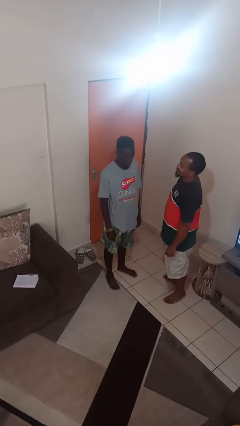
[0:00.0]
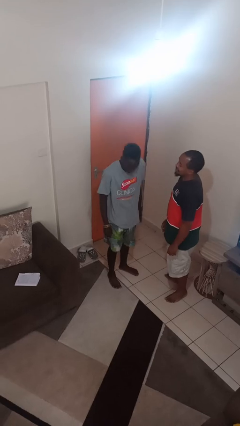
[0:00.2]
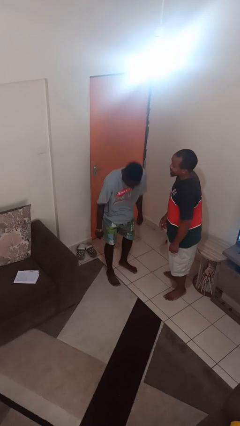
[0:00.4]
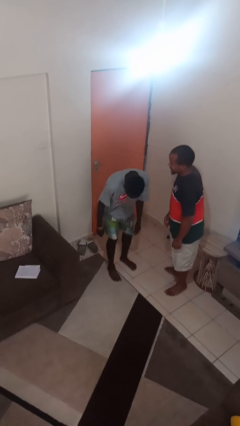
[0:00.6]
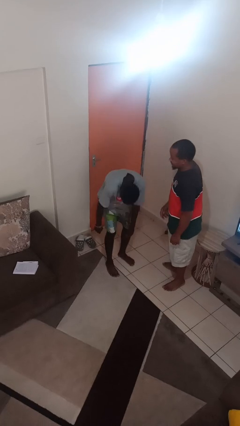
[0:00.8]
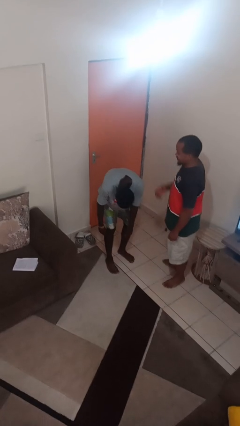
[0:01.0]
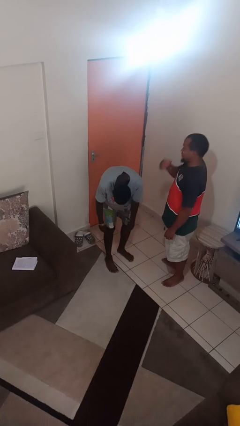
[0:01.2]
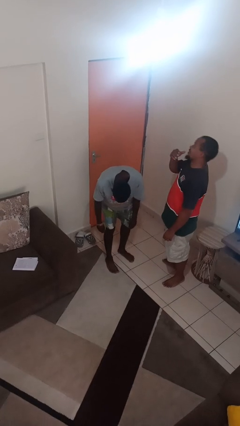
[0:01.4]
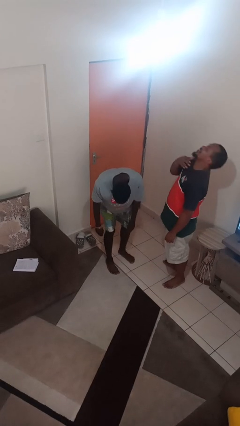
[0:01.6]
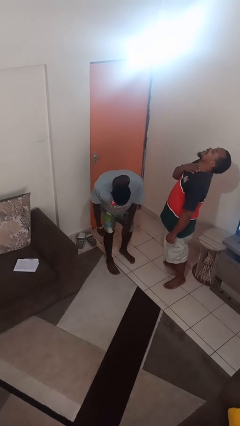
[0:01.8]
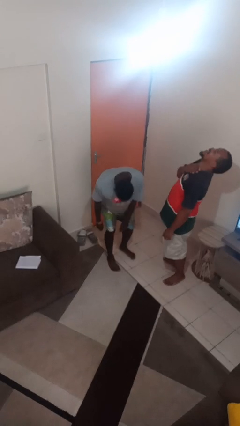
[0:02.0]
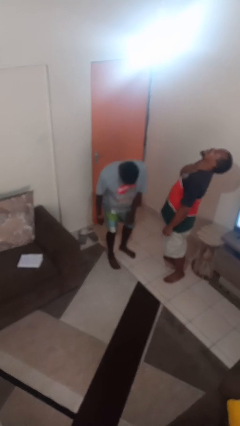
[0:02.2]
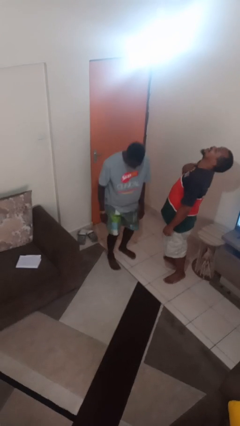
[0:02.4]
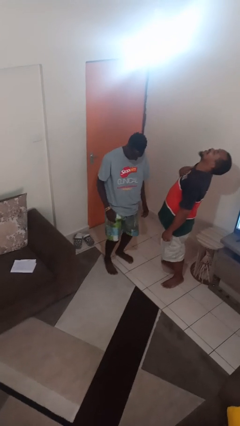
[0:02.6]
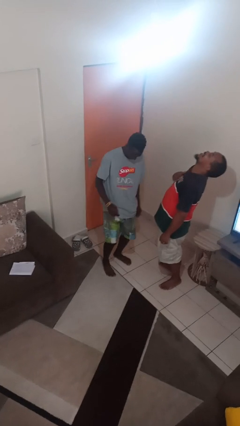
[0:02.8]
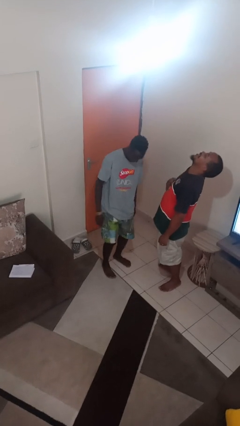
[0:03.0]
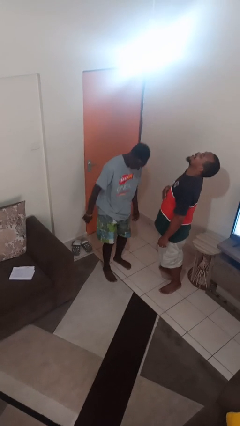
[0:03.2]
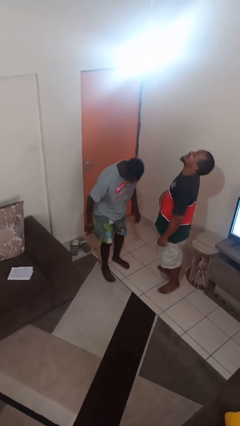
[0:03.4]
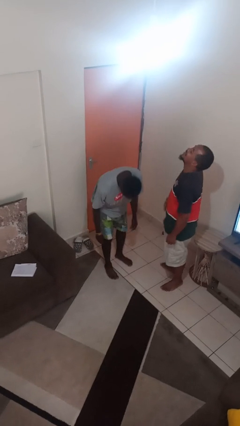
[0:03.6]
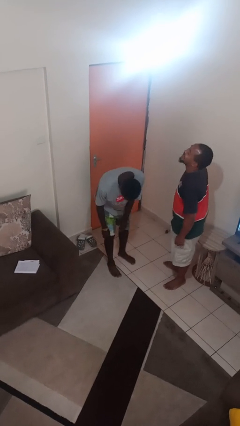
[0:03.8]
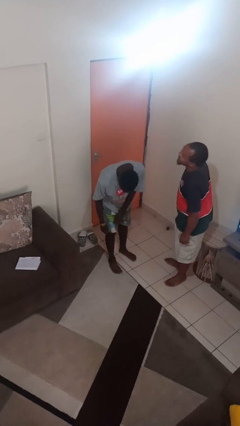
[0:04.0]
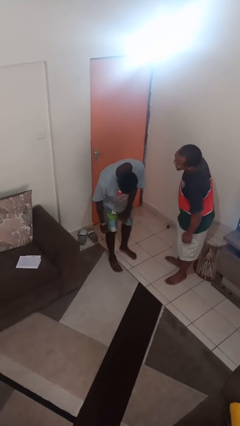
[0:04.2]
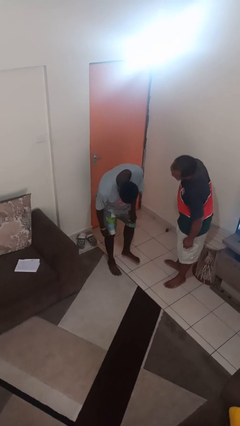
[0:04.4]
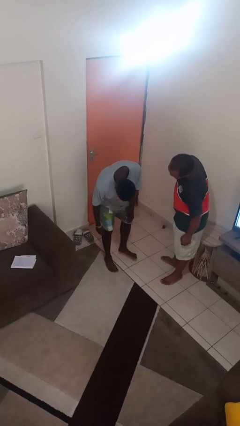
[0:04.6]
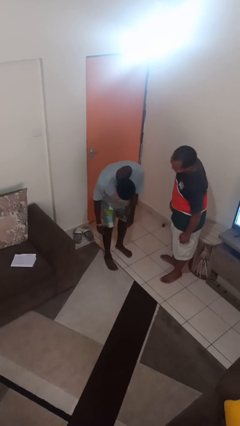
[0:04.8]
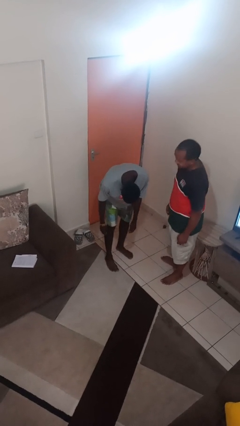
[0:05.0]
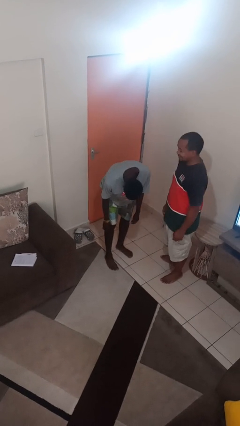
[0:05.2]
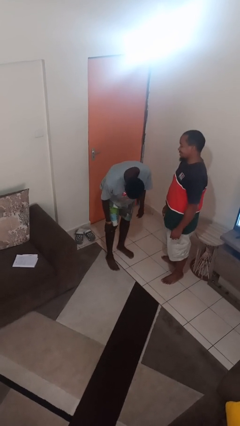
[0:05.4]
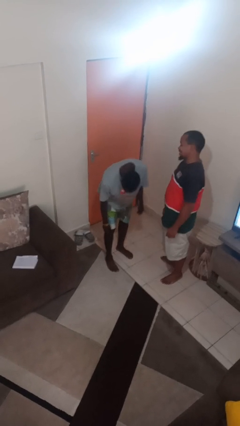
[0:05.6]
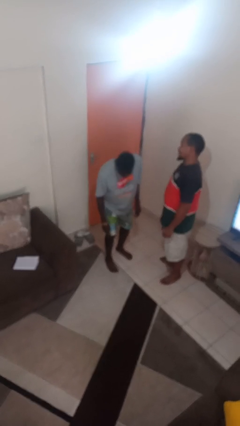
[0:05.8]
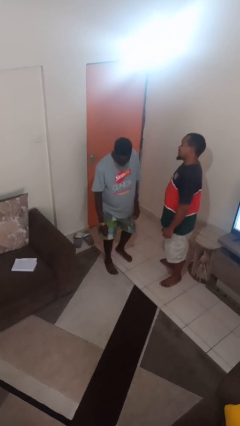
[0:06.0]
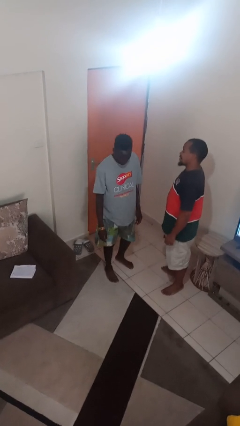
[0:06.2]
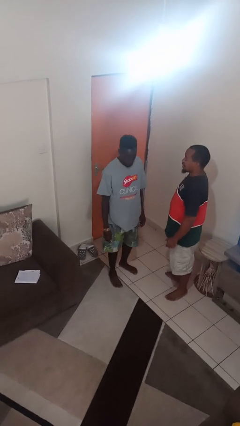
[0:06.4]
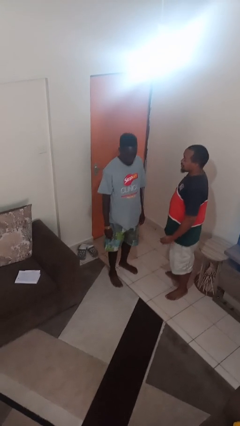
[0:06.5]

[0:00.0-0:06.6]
person laughs with person

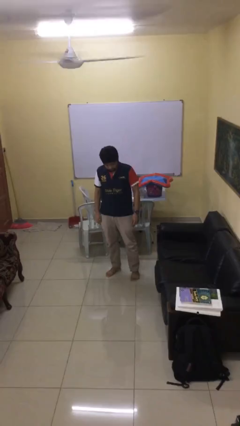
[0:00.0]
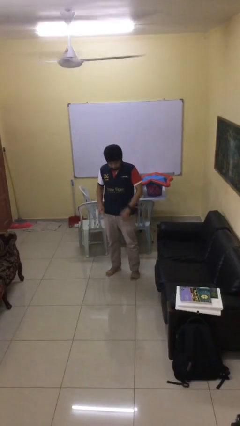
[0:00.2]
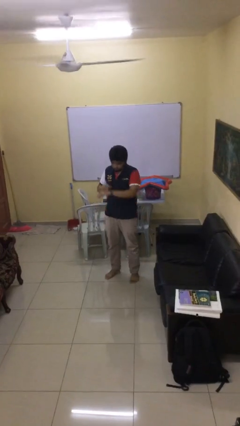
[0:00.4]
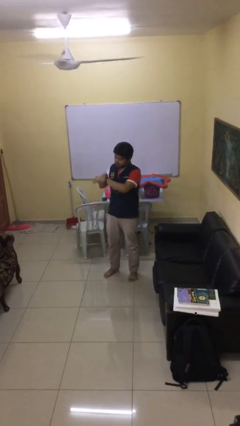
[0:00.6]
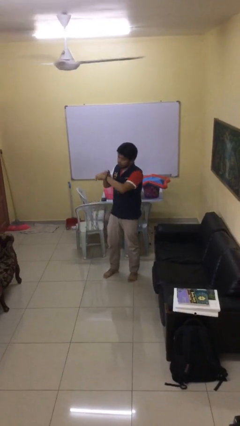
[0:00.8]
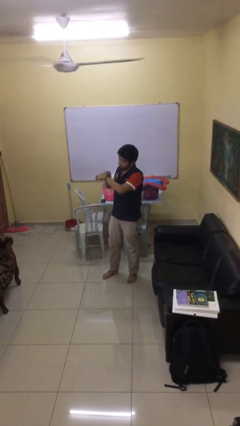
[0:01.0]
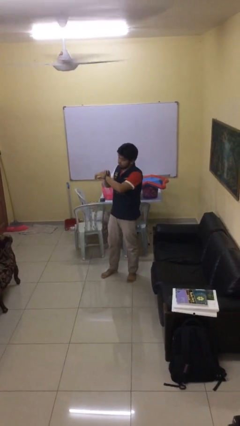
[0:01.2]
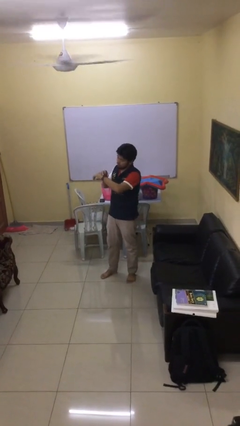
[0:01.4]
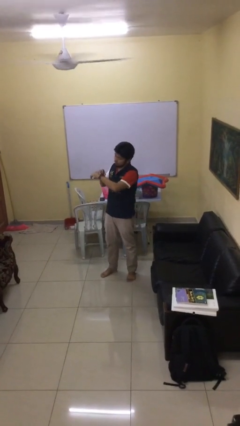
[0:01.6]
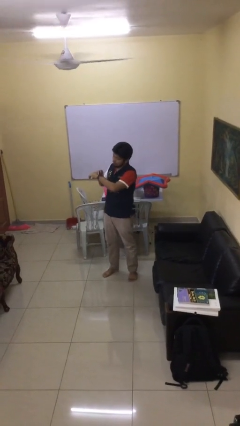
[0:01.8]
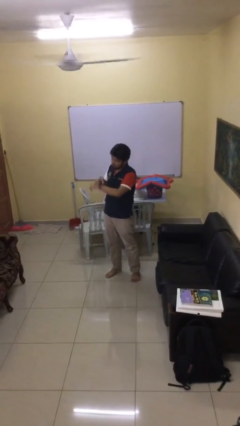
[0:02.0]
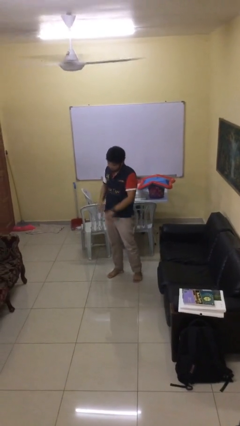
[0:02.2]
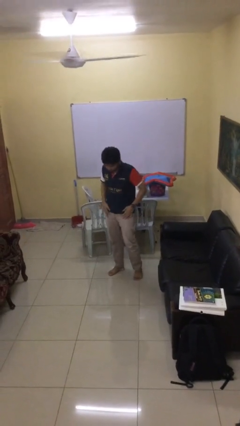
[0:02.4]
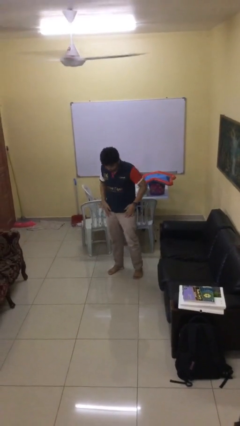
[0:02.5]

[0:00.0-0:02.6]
person looks at wristwatch

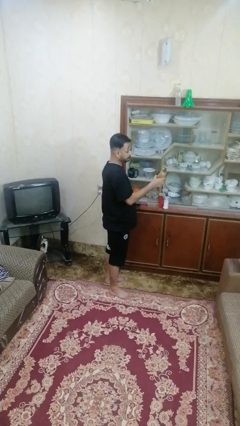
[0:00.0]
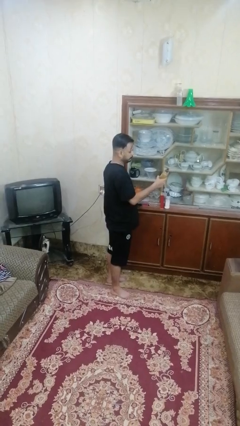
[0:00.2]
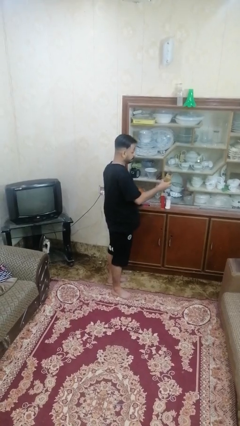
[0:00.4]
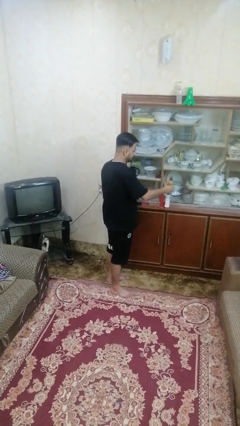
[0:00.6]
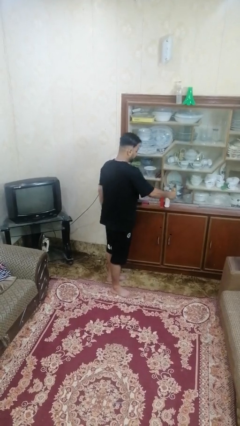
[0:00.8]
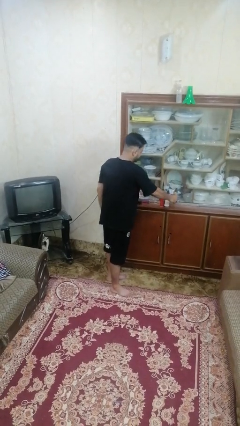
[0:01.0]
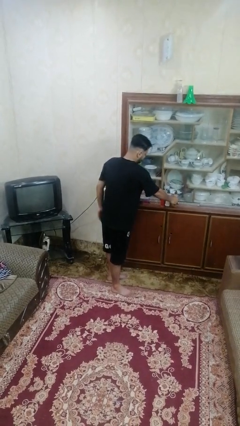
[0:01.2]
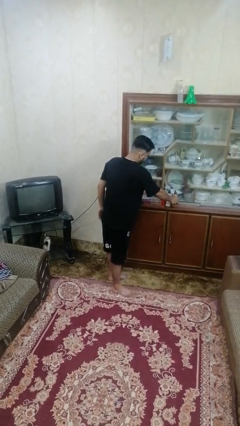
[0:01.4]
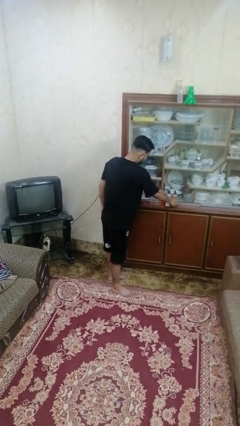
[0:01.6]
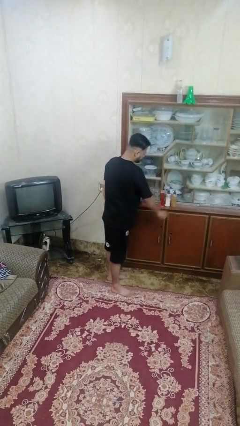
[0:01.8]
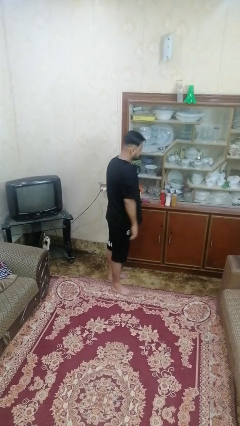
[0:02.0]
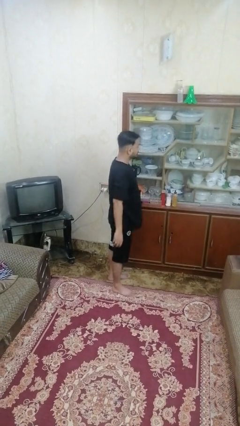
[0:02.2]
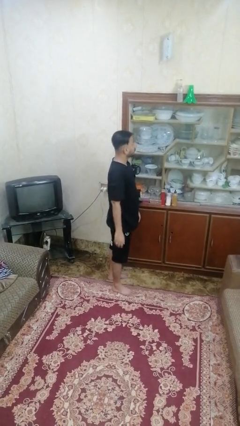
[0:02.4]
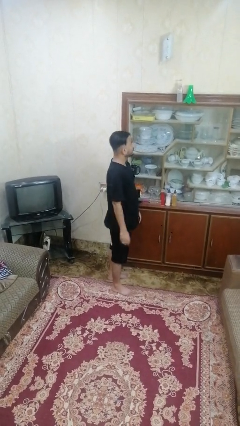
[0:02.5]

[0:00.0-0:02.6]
person puts down object on shelf

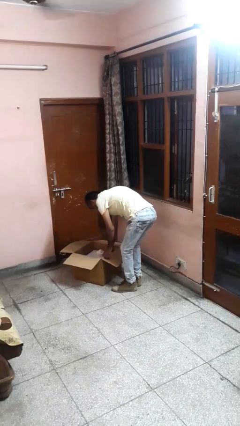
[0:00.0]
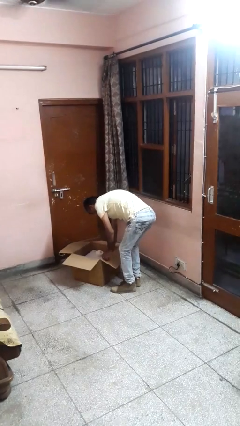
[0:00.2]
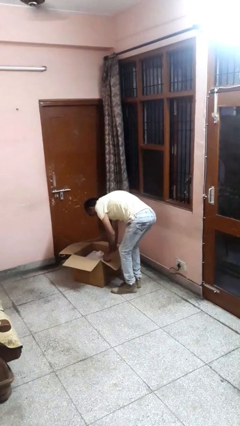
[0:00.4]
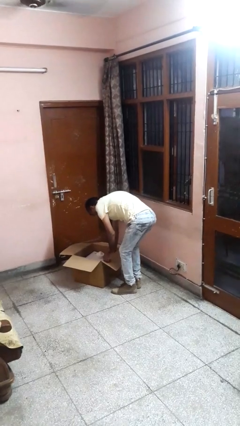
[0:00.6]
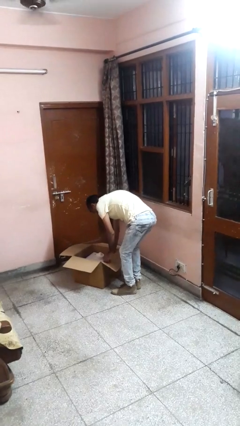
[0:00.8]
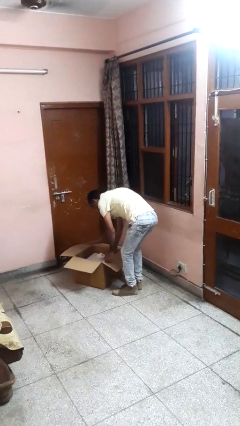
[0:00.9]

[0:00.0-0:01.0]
person puts object into box

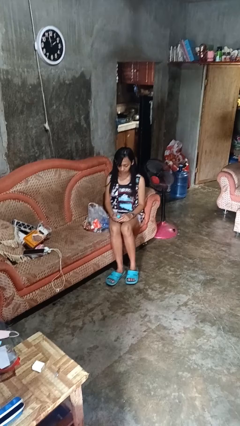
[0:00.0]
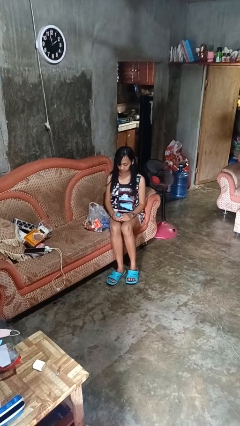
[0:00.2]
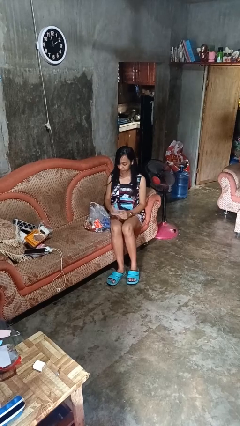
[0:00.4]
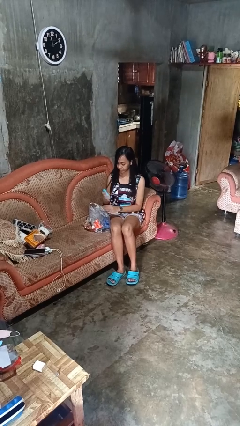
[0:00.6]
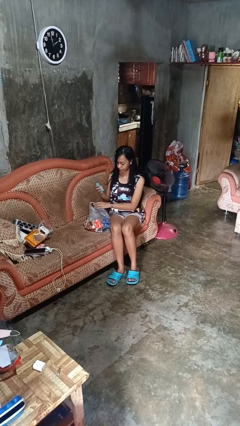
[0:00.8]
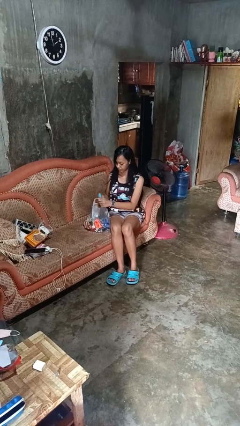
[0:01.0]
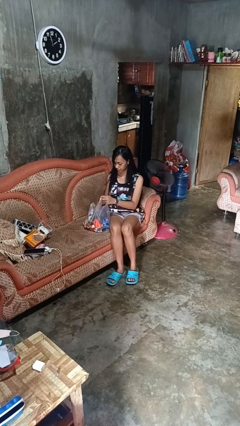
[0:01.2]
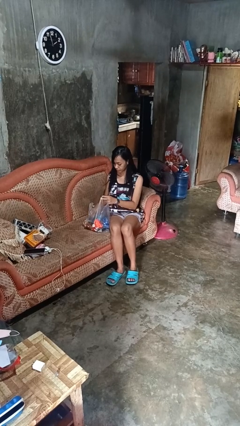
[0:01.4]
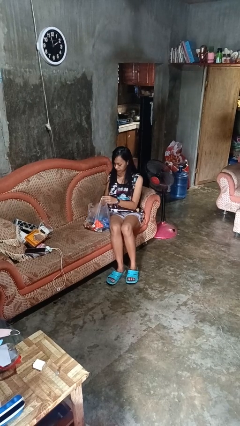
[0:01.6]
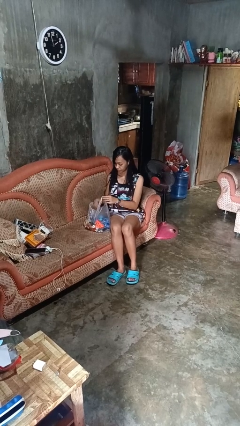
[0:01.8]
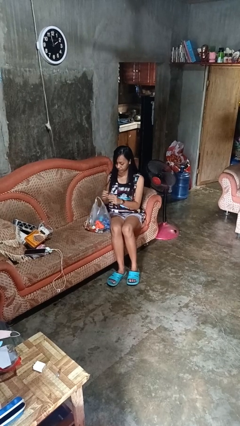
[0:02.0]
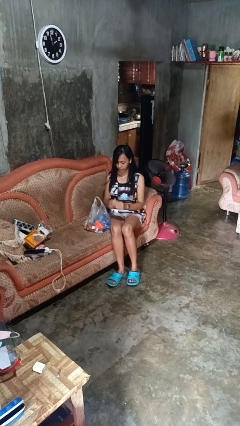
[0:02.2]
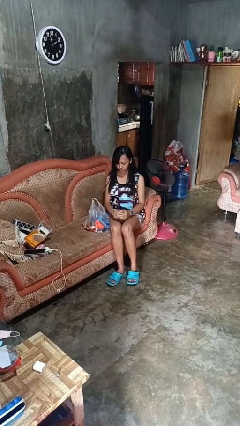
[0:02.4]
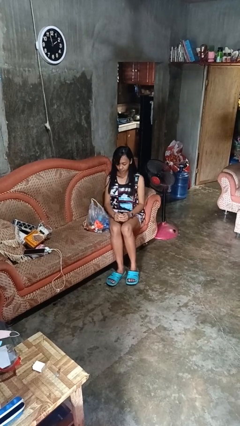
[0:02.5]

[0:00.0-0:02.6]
person puts object into bag

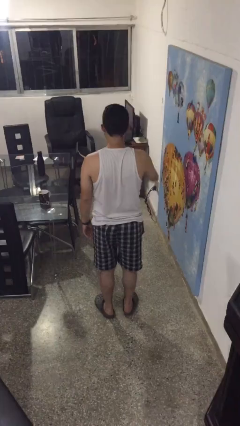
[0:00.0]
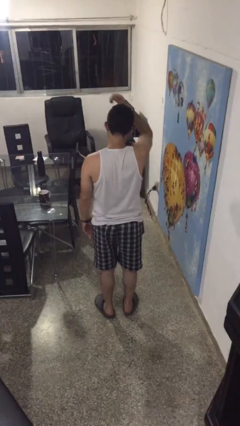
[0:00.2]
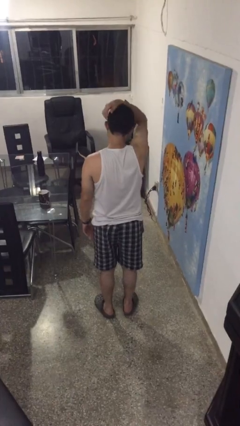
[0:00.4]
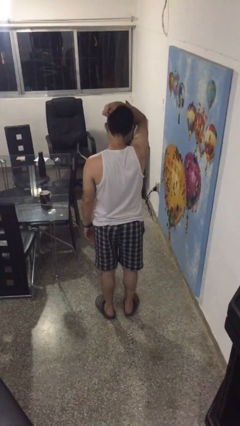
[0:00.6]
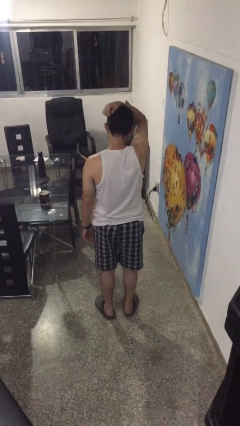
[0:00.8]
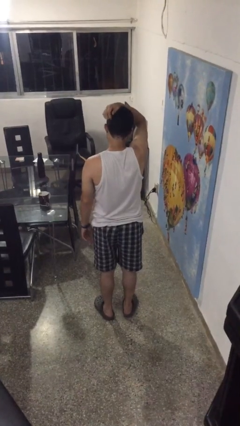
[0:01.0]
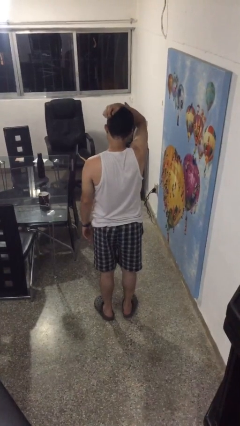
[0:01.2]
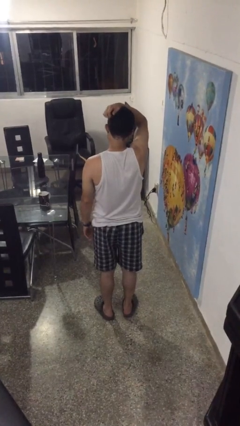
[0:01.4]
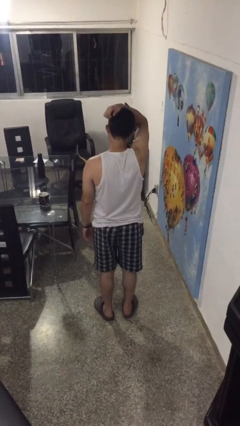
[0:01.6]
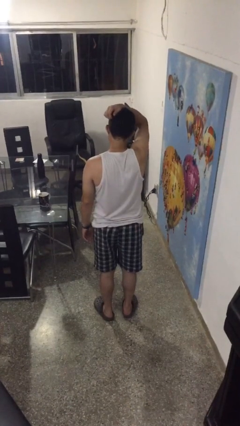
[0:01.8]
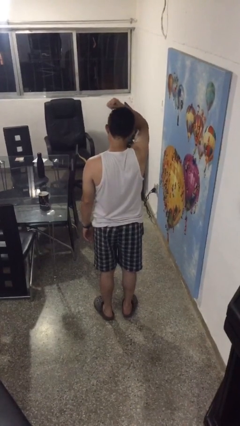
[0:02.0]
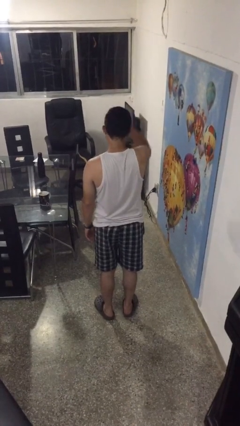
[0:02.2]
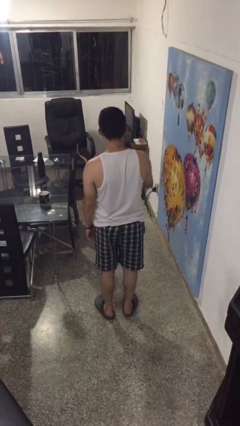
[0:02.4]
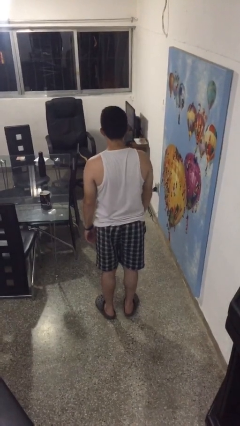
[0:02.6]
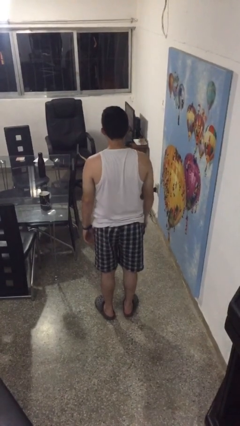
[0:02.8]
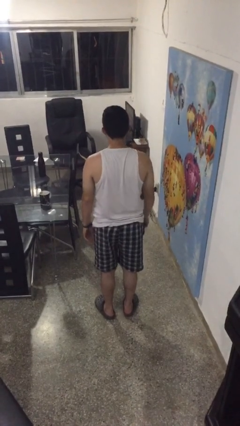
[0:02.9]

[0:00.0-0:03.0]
person scratches face
